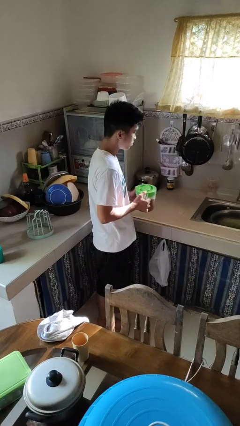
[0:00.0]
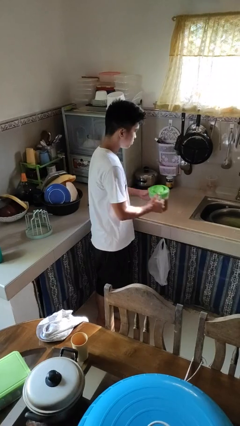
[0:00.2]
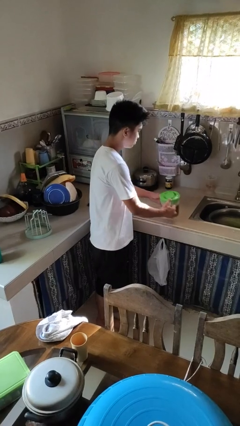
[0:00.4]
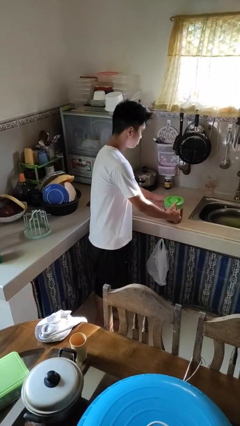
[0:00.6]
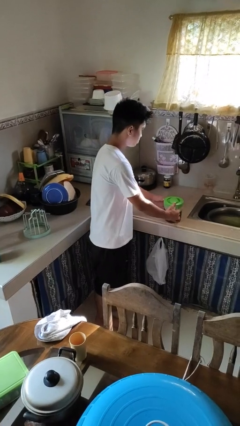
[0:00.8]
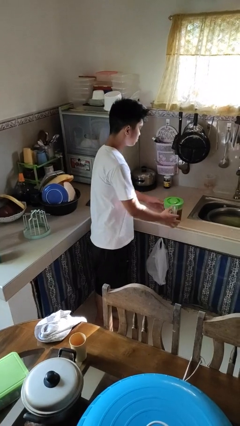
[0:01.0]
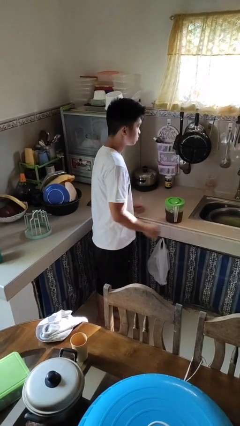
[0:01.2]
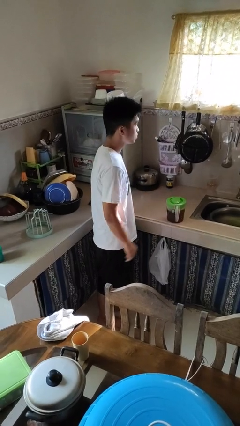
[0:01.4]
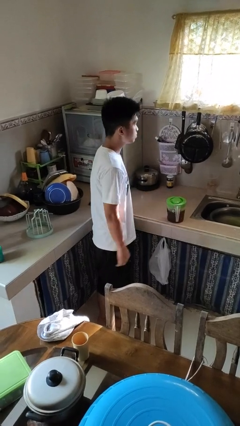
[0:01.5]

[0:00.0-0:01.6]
person puts down object on countertop

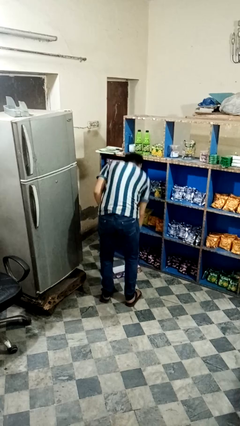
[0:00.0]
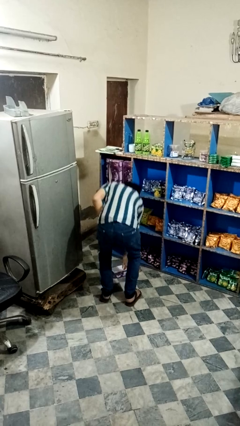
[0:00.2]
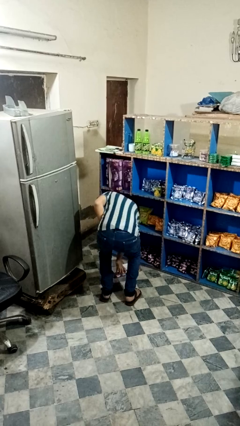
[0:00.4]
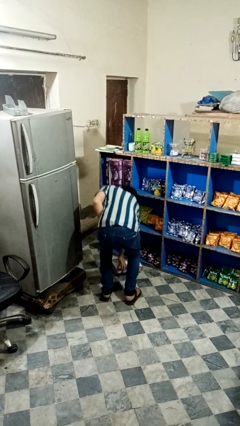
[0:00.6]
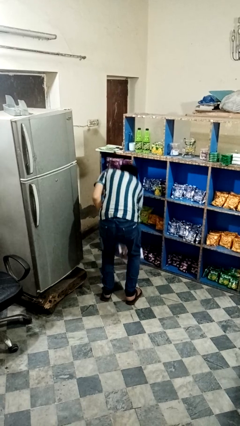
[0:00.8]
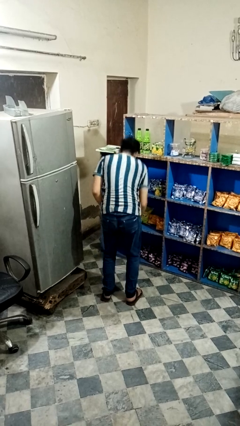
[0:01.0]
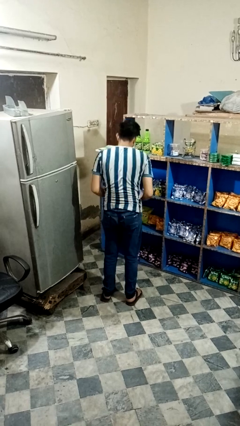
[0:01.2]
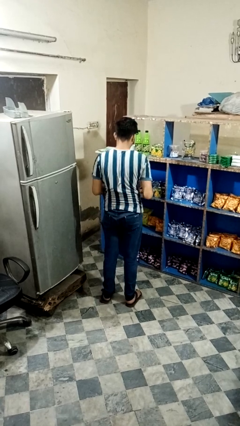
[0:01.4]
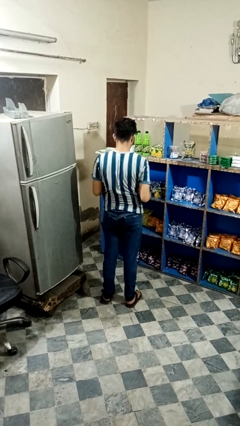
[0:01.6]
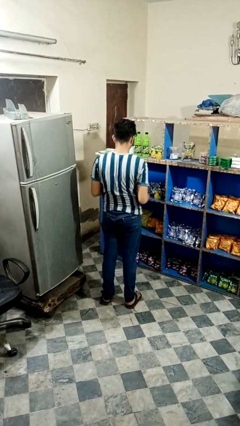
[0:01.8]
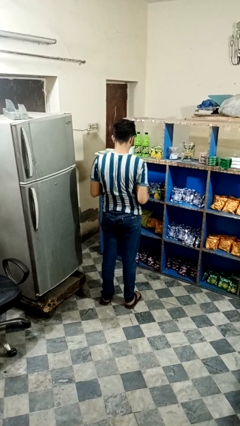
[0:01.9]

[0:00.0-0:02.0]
person picks up object from floor

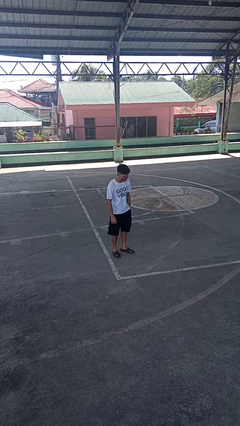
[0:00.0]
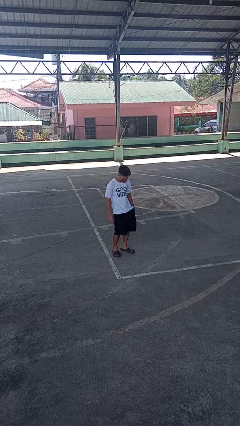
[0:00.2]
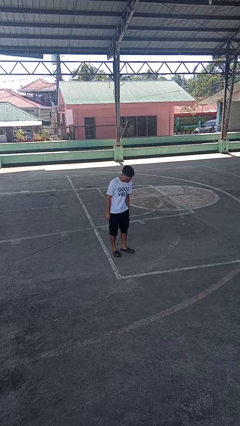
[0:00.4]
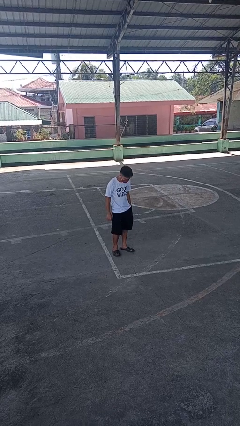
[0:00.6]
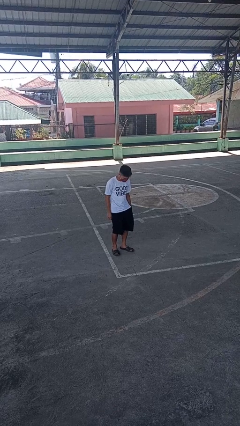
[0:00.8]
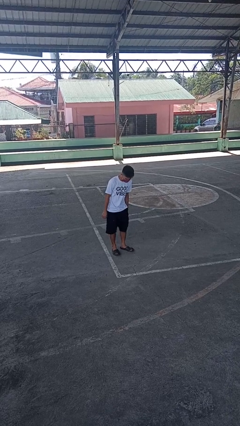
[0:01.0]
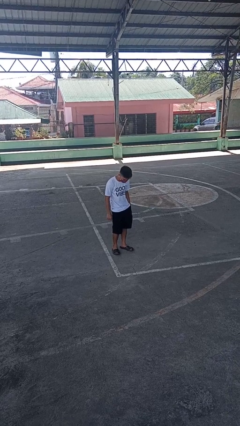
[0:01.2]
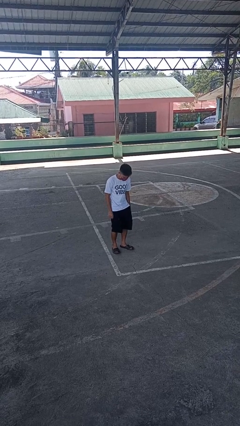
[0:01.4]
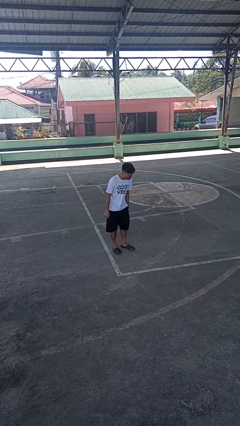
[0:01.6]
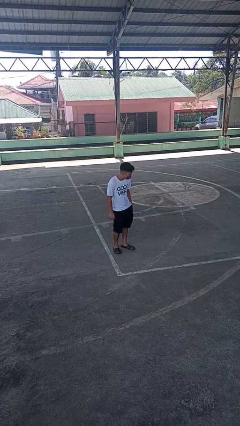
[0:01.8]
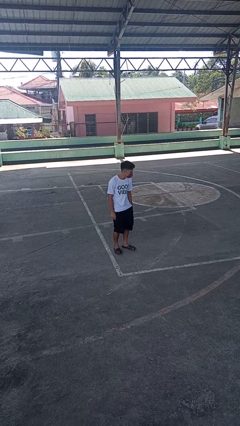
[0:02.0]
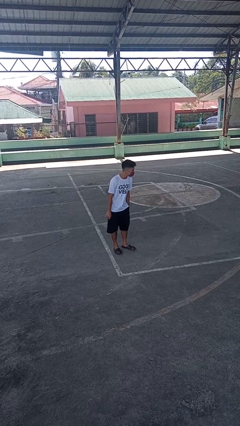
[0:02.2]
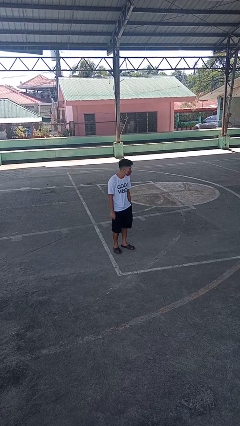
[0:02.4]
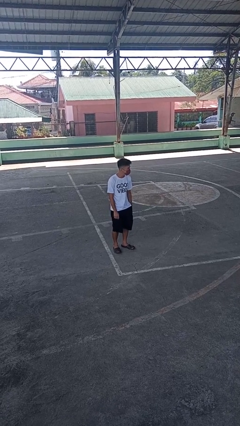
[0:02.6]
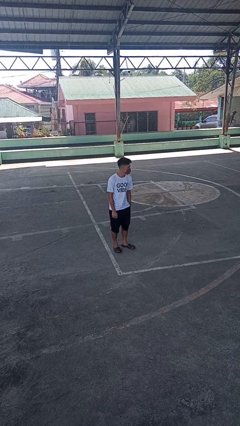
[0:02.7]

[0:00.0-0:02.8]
person wiggles hips

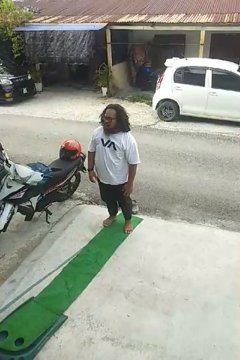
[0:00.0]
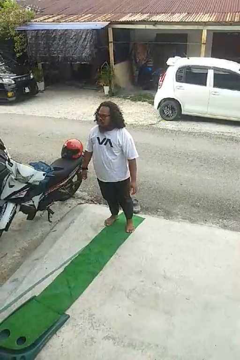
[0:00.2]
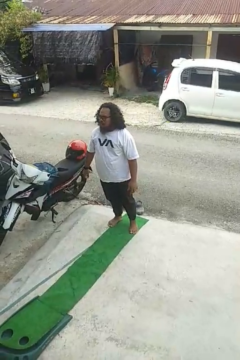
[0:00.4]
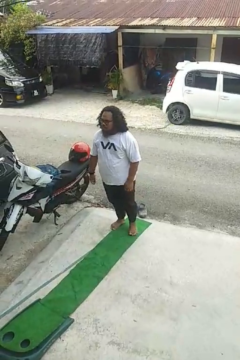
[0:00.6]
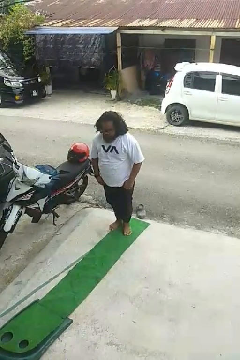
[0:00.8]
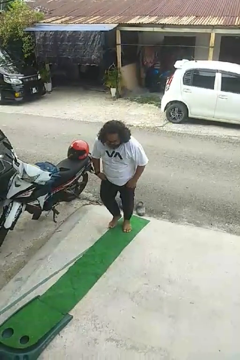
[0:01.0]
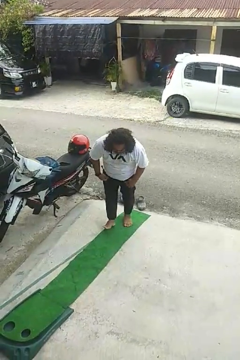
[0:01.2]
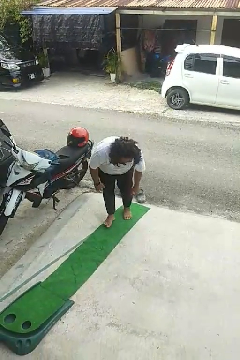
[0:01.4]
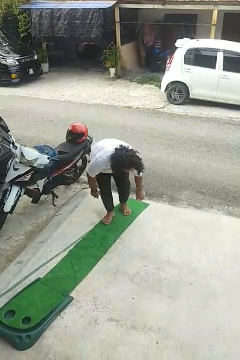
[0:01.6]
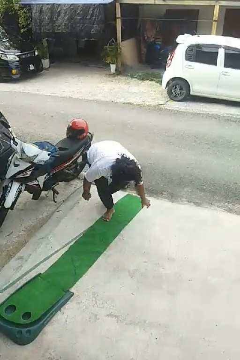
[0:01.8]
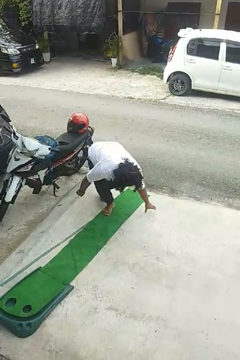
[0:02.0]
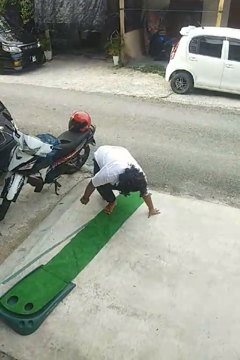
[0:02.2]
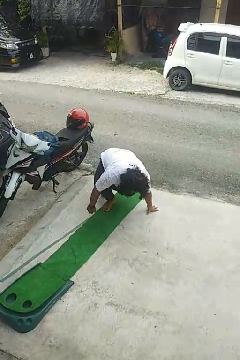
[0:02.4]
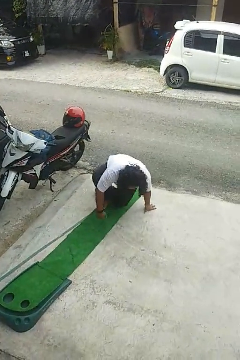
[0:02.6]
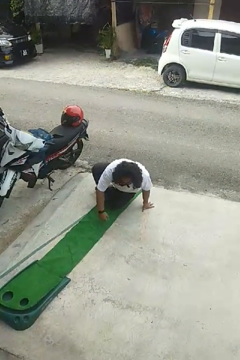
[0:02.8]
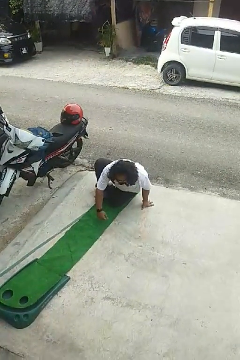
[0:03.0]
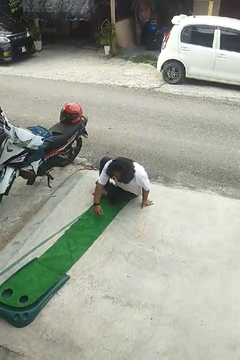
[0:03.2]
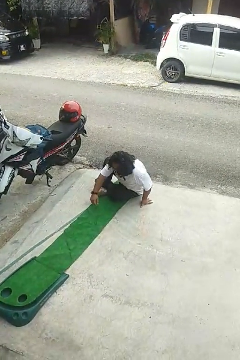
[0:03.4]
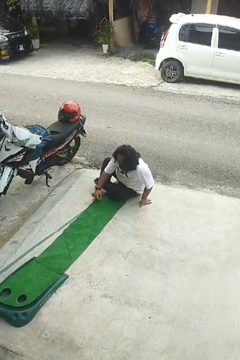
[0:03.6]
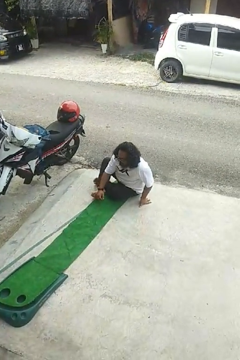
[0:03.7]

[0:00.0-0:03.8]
person sits crisscross

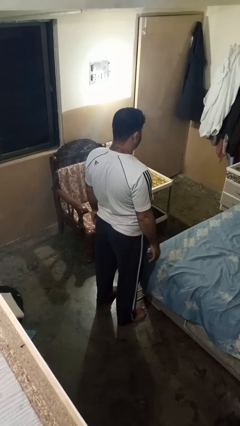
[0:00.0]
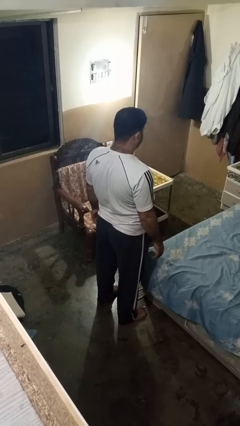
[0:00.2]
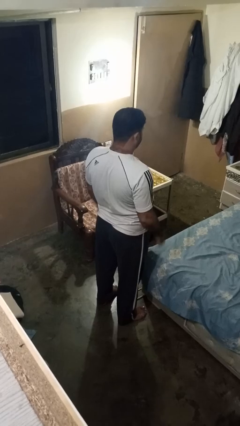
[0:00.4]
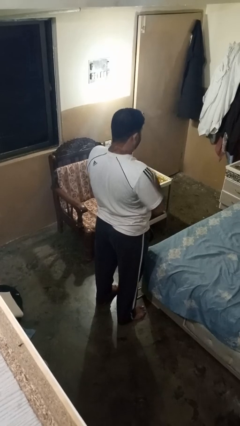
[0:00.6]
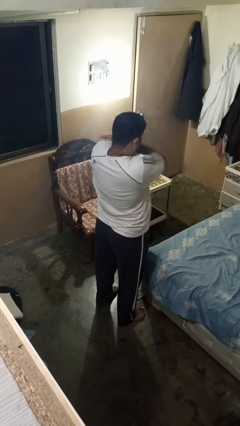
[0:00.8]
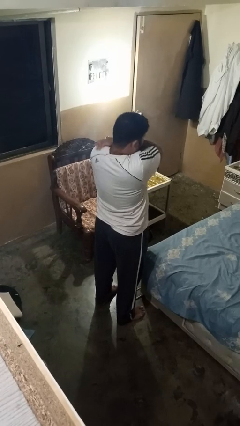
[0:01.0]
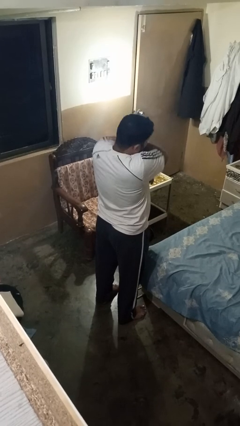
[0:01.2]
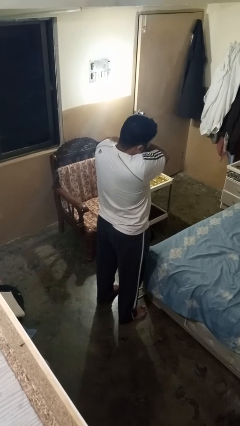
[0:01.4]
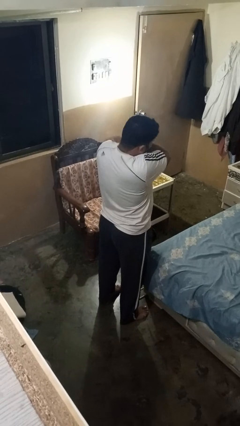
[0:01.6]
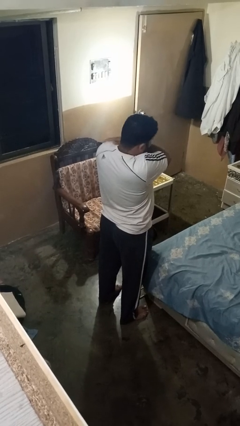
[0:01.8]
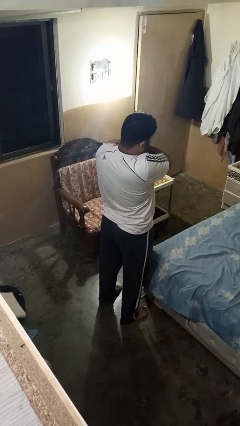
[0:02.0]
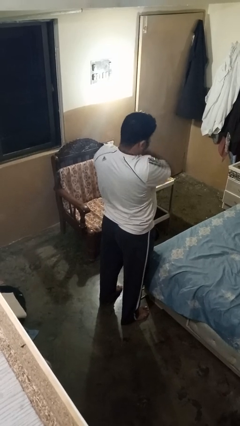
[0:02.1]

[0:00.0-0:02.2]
person swats bug

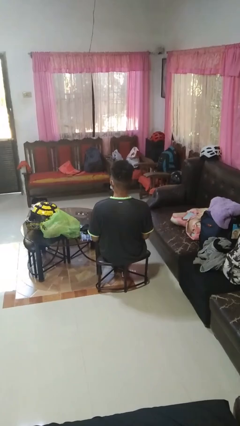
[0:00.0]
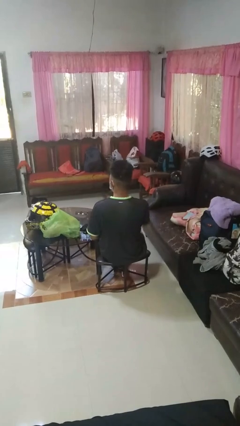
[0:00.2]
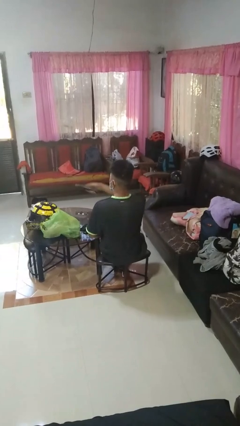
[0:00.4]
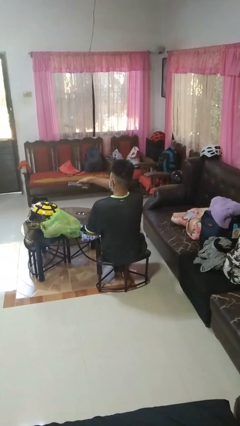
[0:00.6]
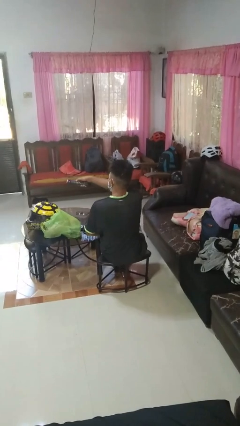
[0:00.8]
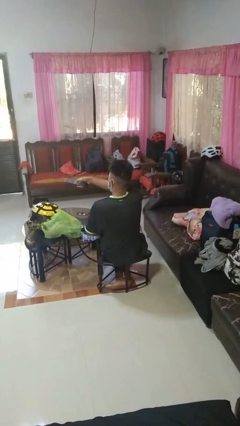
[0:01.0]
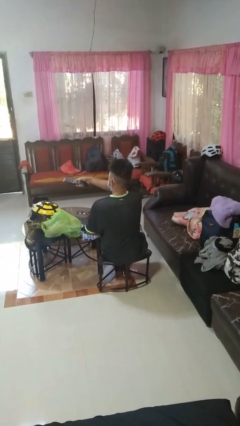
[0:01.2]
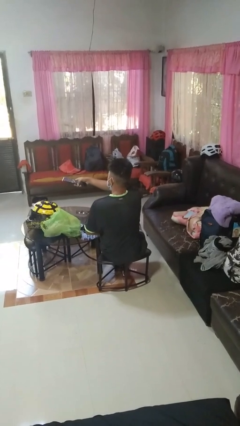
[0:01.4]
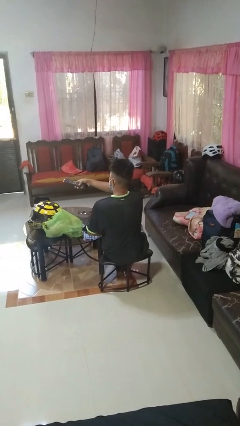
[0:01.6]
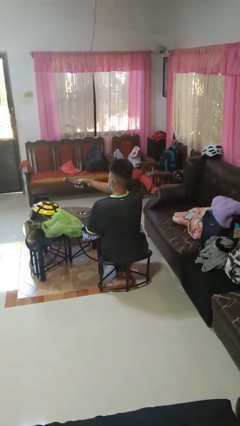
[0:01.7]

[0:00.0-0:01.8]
person uses television remote

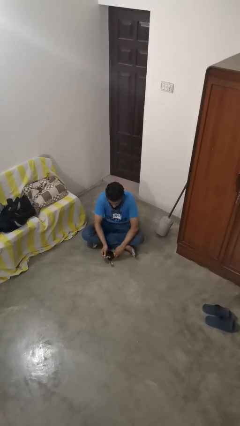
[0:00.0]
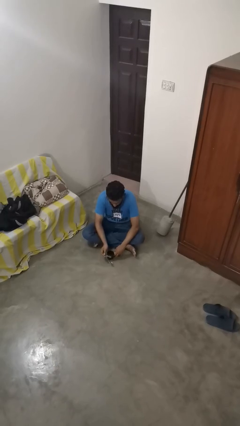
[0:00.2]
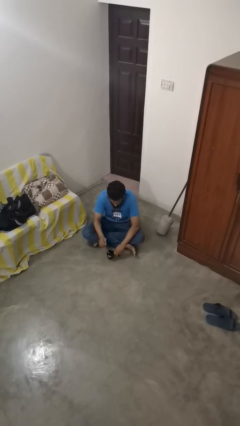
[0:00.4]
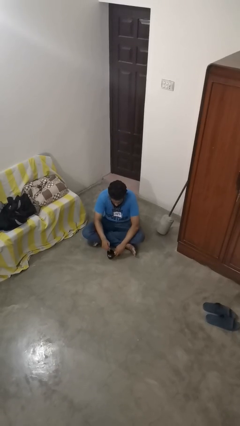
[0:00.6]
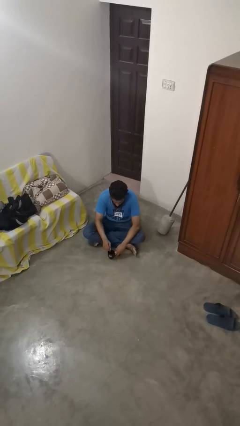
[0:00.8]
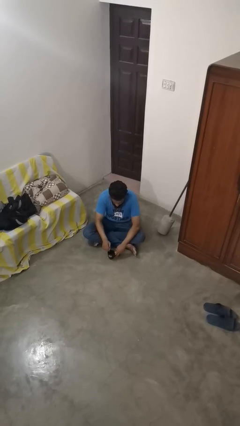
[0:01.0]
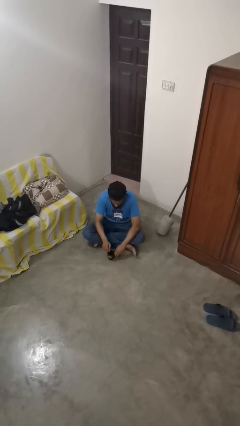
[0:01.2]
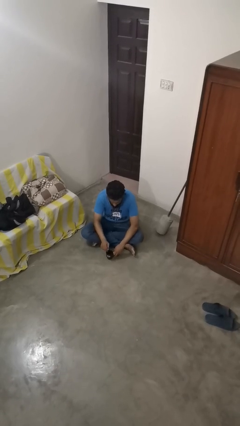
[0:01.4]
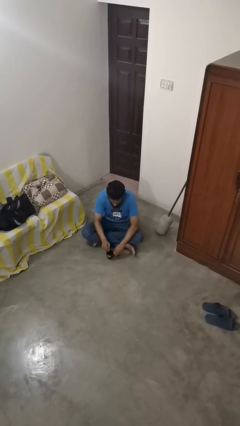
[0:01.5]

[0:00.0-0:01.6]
person stirs mug

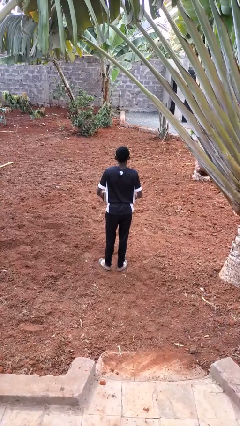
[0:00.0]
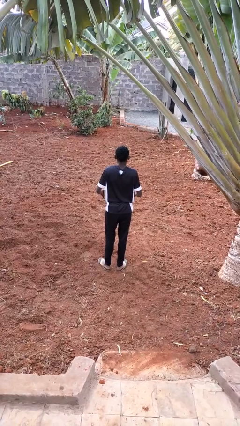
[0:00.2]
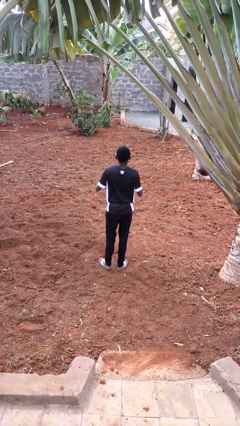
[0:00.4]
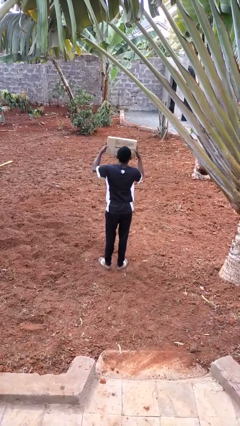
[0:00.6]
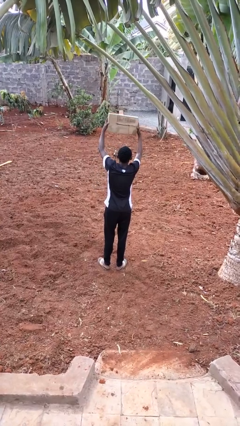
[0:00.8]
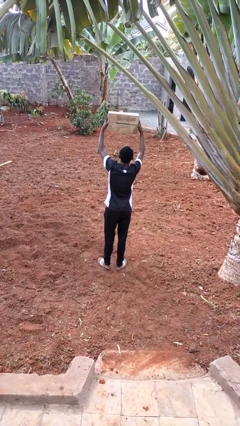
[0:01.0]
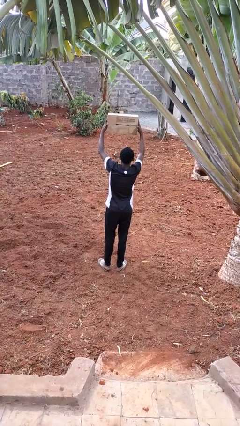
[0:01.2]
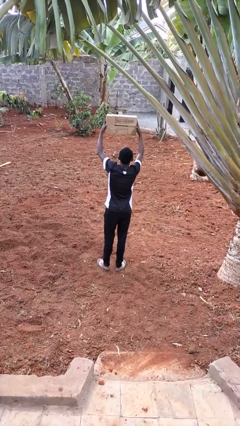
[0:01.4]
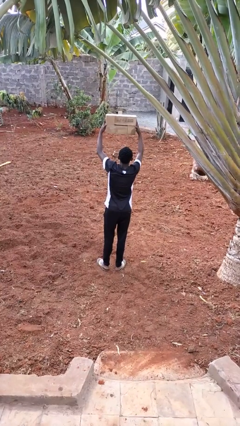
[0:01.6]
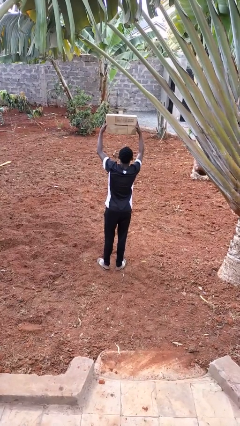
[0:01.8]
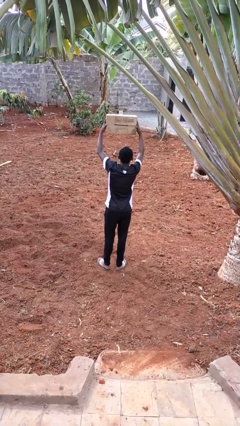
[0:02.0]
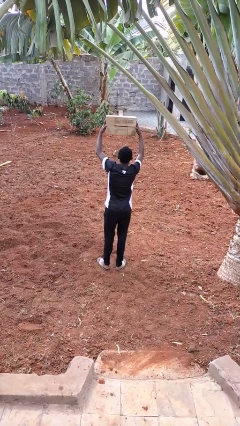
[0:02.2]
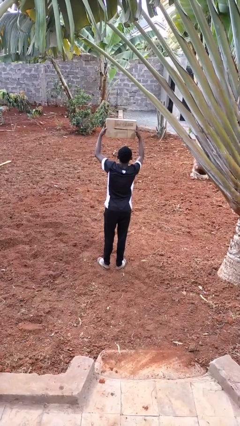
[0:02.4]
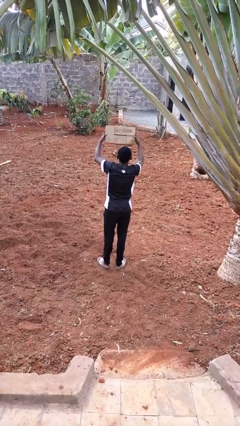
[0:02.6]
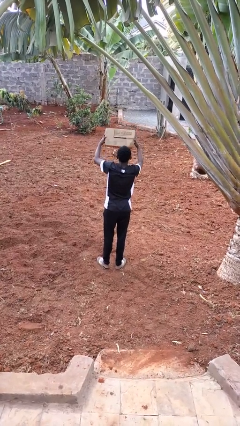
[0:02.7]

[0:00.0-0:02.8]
person holds object above head
